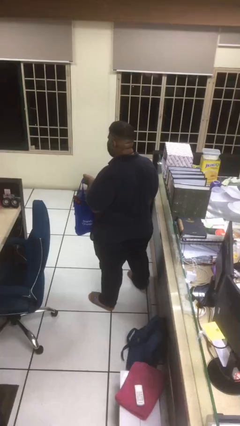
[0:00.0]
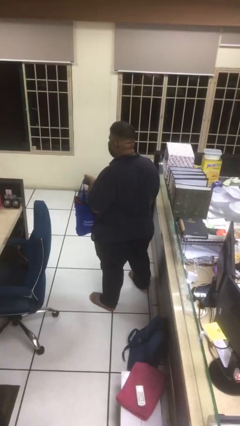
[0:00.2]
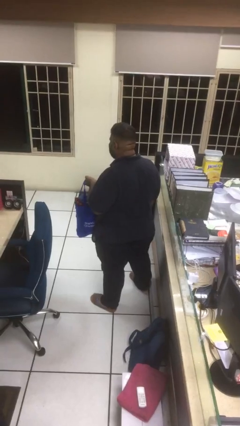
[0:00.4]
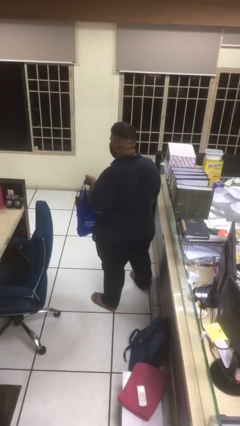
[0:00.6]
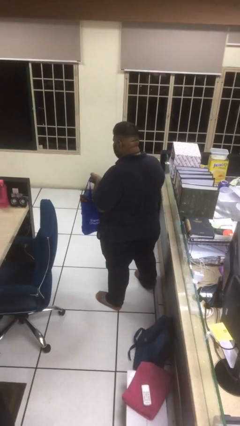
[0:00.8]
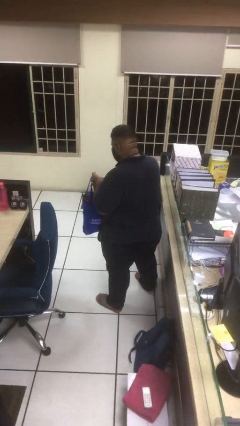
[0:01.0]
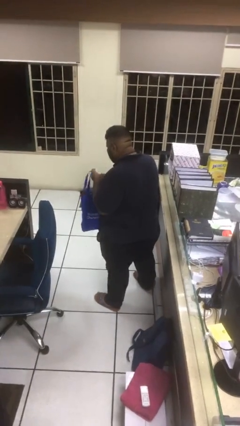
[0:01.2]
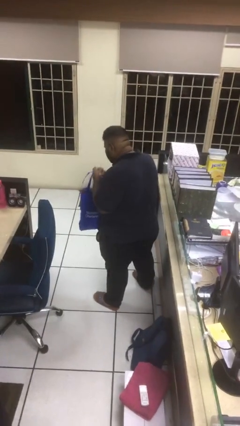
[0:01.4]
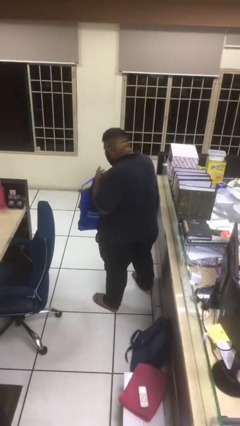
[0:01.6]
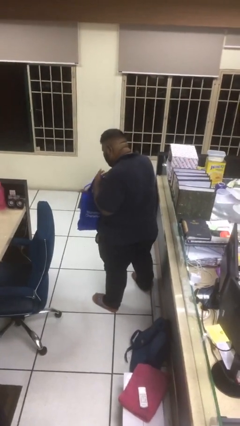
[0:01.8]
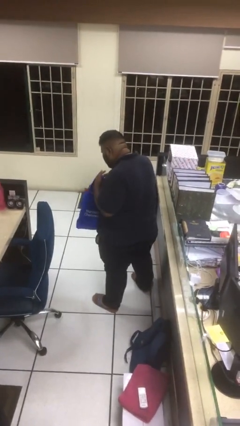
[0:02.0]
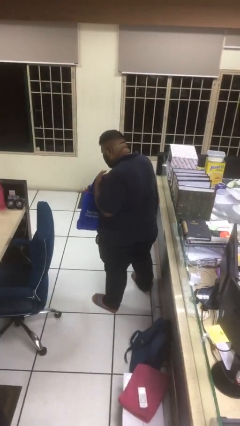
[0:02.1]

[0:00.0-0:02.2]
person searches in bag

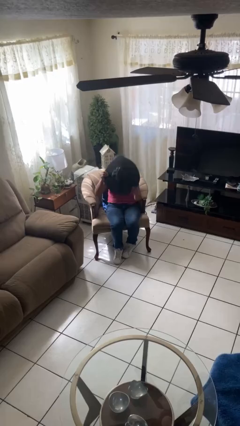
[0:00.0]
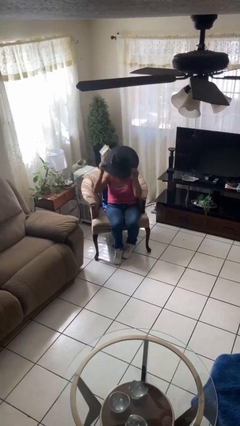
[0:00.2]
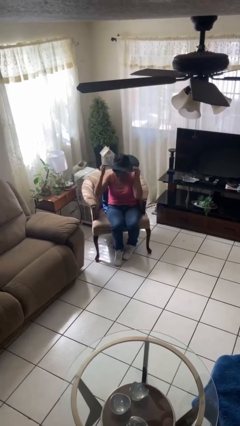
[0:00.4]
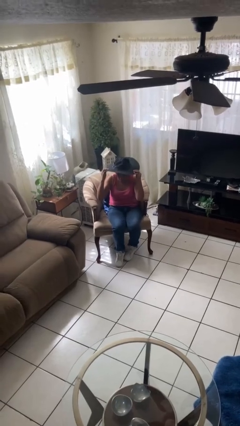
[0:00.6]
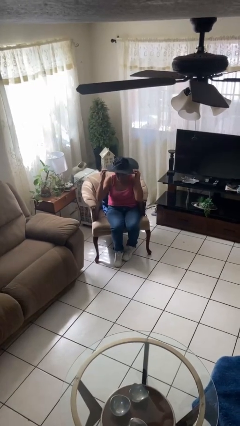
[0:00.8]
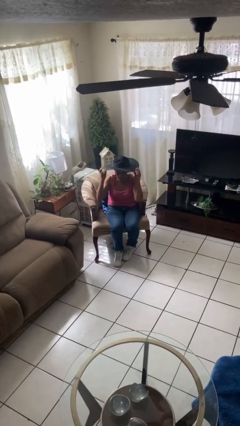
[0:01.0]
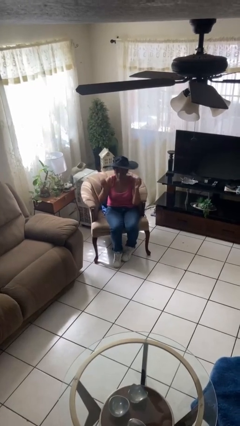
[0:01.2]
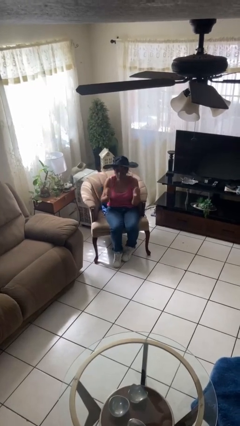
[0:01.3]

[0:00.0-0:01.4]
person puts on hat

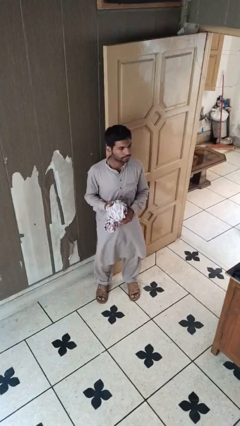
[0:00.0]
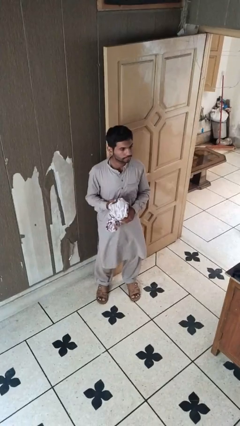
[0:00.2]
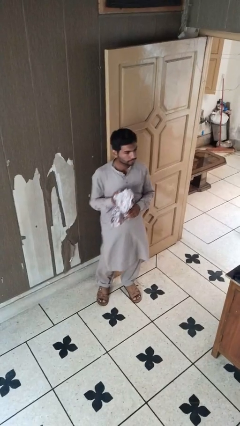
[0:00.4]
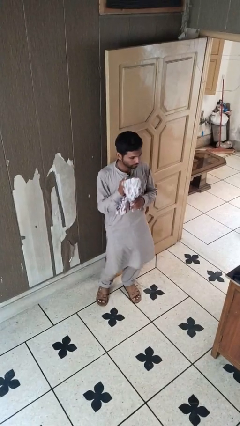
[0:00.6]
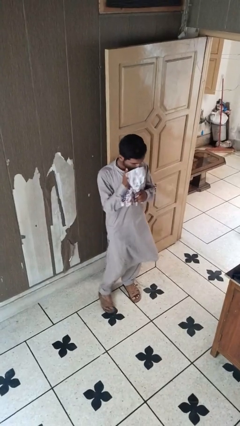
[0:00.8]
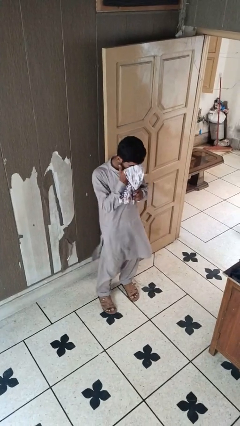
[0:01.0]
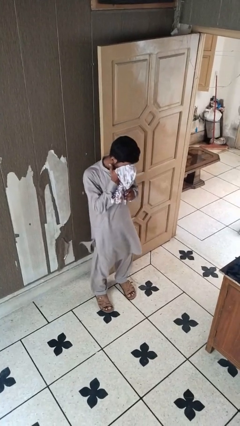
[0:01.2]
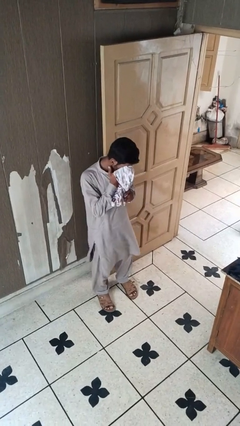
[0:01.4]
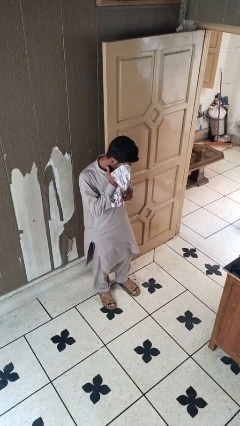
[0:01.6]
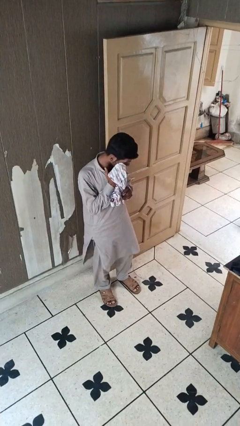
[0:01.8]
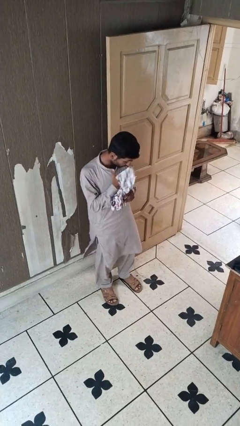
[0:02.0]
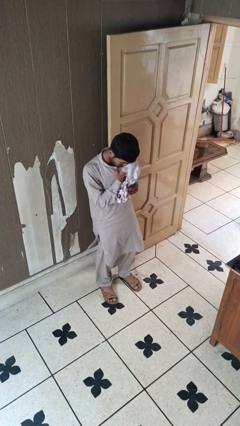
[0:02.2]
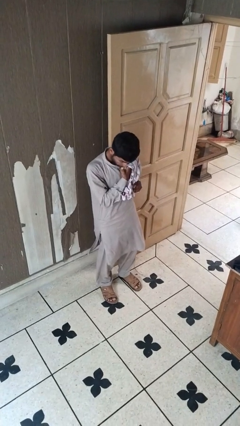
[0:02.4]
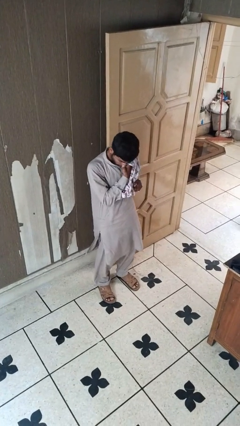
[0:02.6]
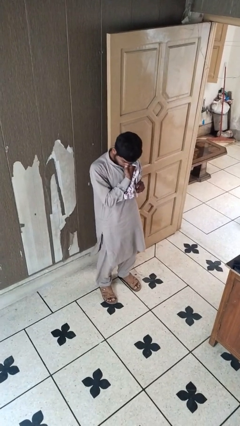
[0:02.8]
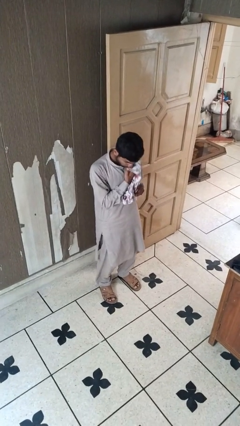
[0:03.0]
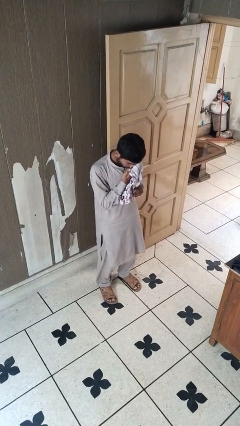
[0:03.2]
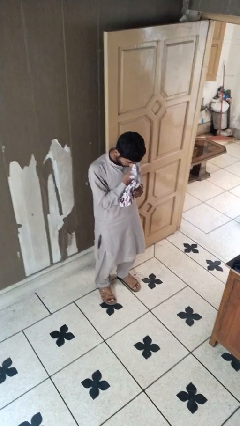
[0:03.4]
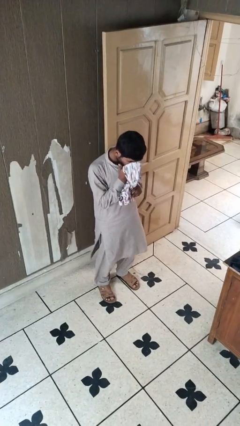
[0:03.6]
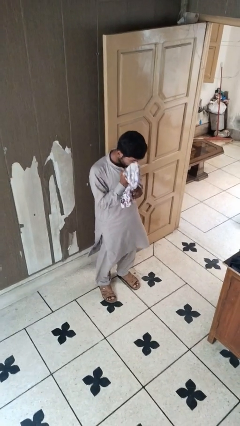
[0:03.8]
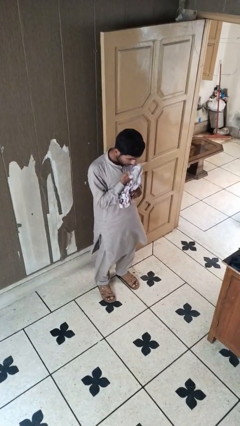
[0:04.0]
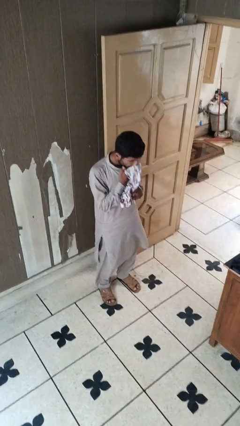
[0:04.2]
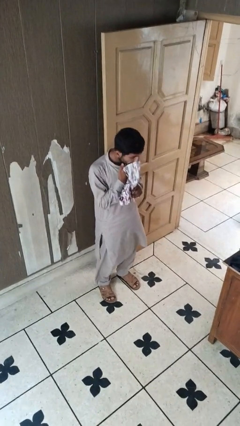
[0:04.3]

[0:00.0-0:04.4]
person wipes mouth with napkin

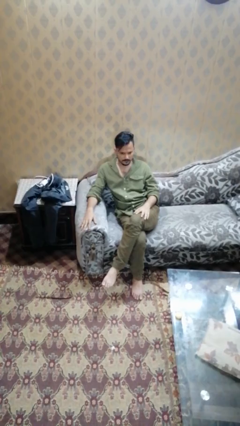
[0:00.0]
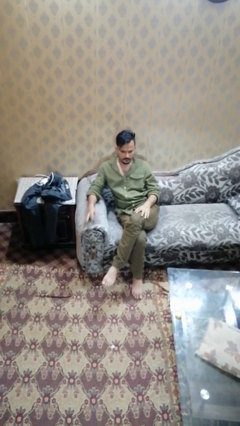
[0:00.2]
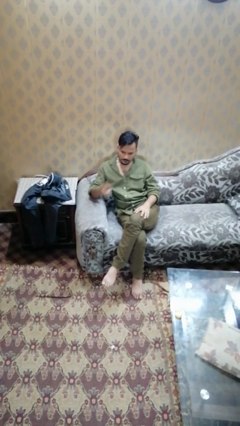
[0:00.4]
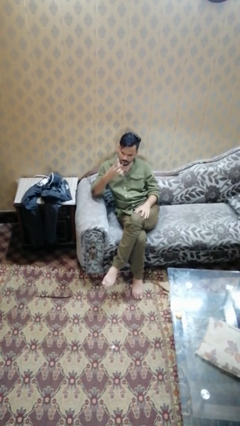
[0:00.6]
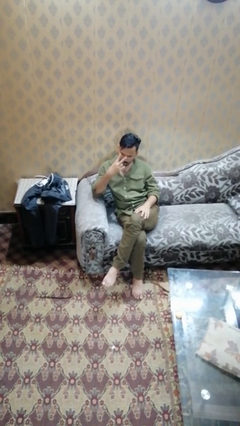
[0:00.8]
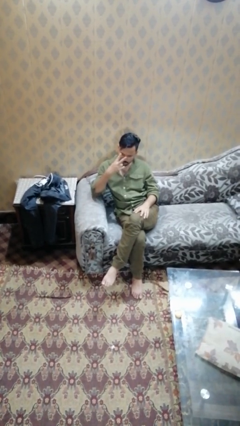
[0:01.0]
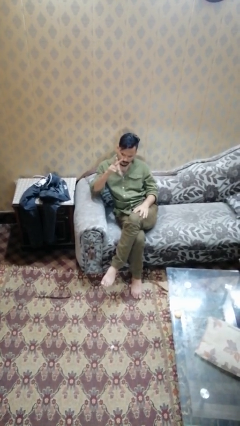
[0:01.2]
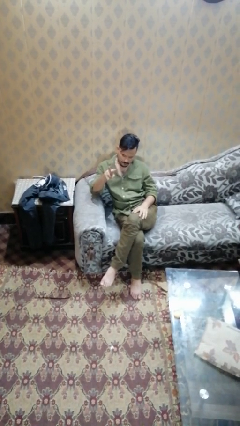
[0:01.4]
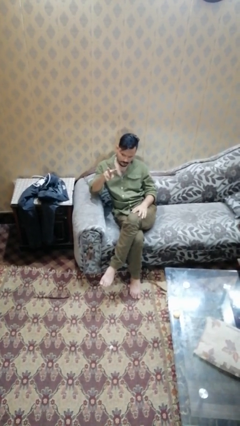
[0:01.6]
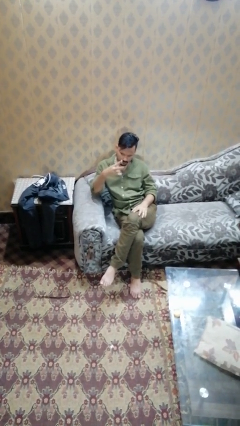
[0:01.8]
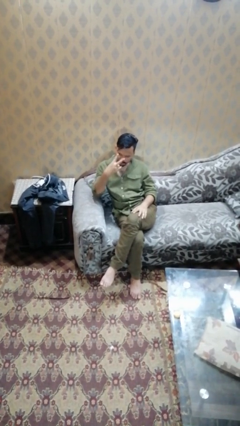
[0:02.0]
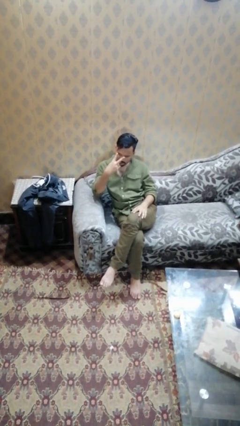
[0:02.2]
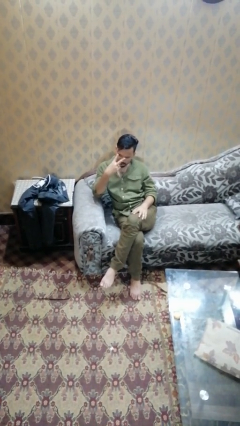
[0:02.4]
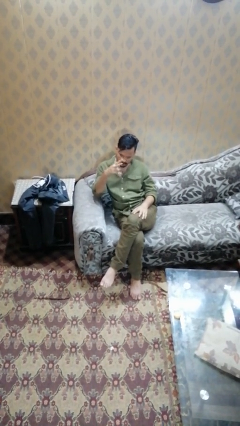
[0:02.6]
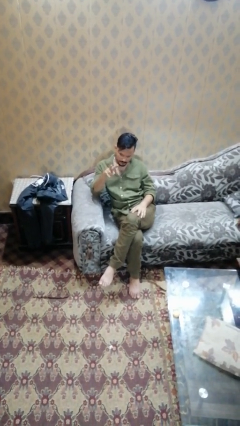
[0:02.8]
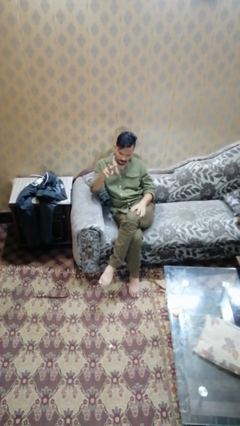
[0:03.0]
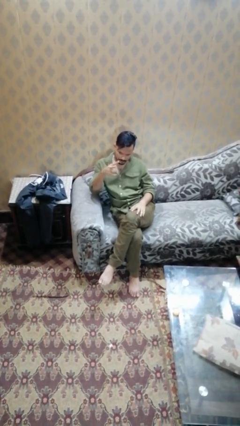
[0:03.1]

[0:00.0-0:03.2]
person gestures watch closely

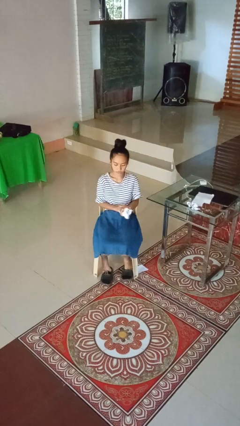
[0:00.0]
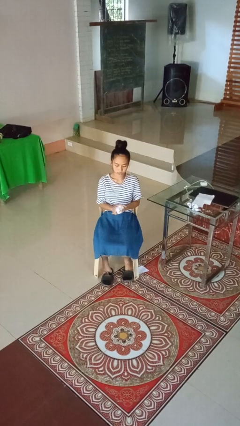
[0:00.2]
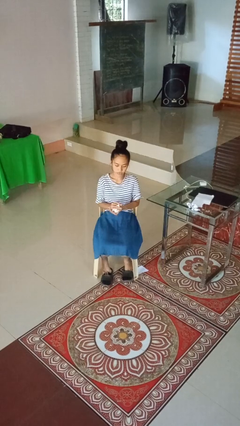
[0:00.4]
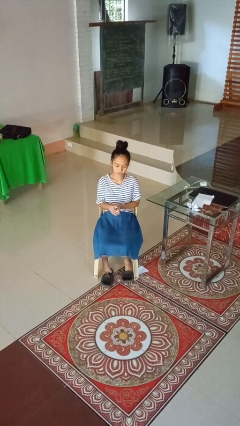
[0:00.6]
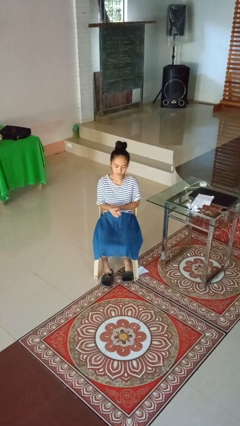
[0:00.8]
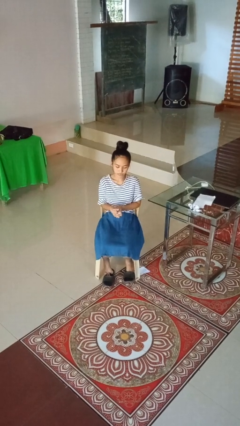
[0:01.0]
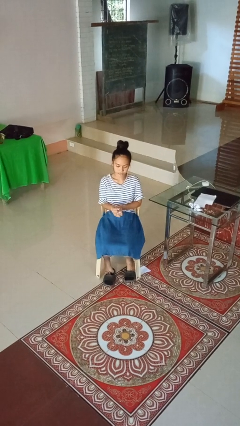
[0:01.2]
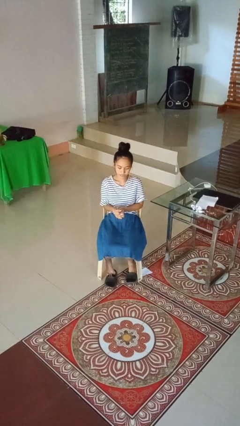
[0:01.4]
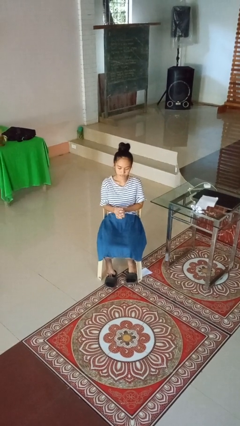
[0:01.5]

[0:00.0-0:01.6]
person crumples paper

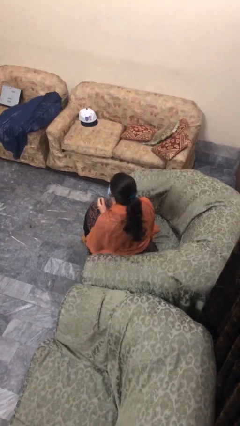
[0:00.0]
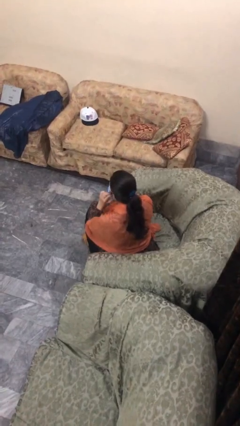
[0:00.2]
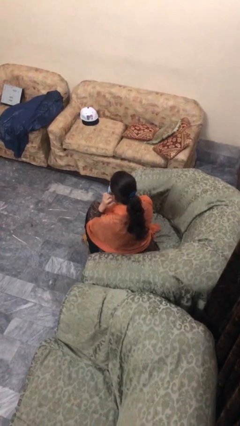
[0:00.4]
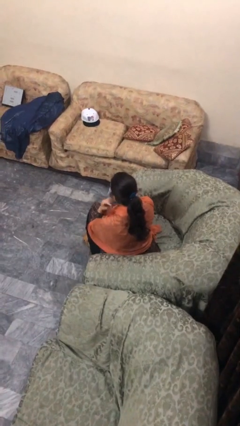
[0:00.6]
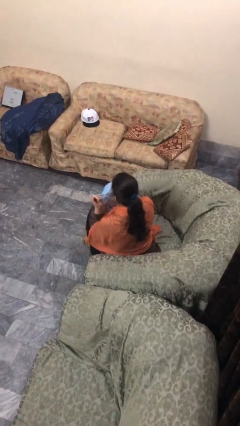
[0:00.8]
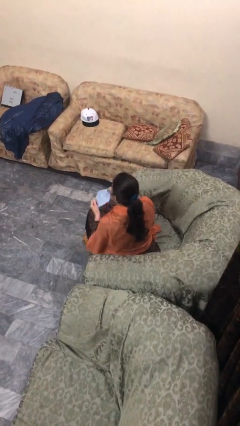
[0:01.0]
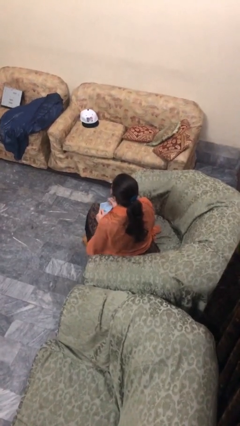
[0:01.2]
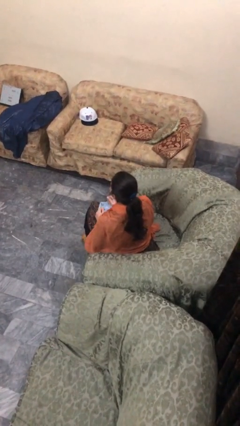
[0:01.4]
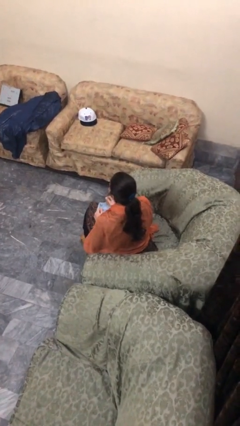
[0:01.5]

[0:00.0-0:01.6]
person takes off facemask

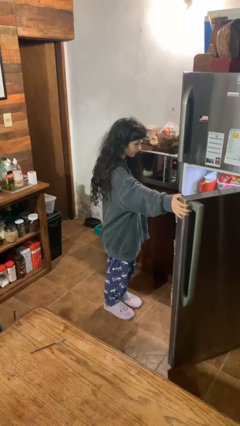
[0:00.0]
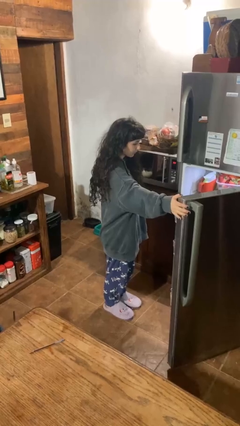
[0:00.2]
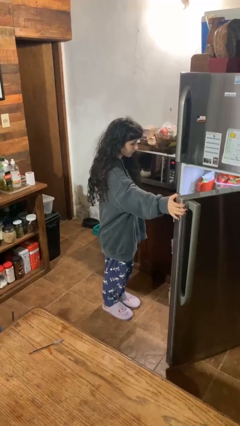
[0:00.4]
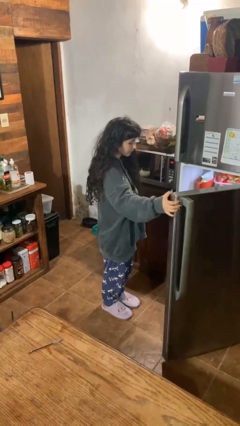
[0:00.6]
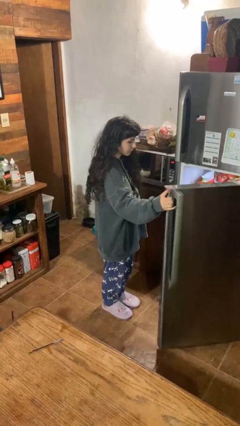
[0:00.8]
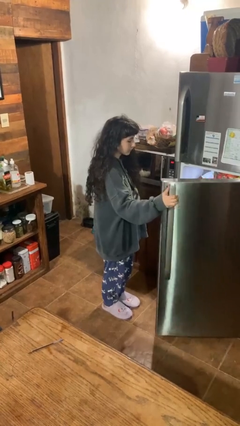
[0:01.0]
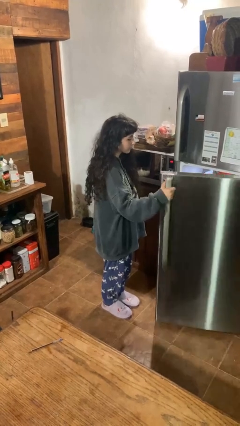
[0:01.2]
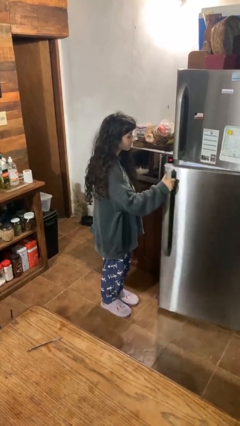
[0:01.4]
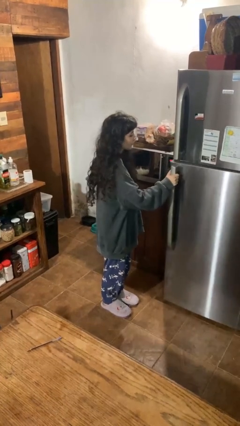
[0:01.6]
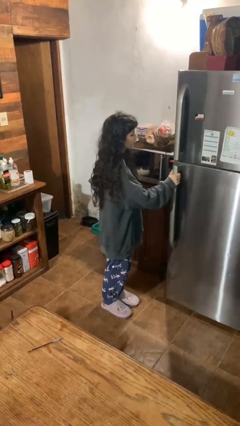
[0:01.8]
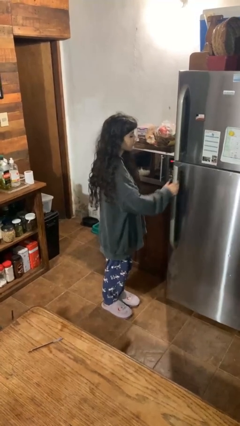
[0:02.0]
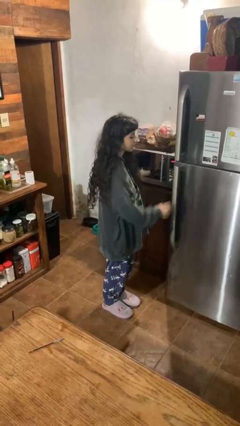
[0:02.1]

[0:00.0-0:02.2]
person closes refrigerator

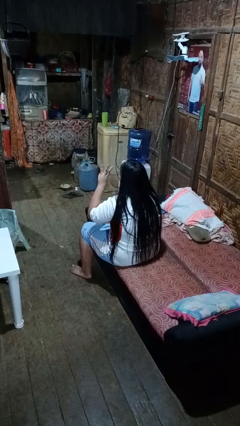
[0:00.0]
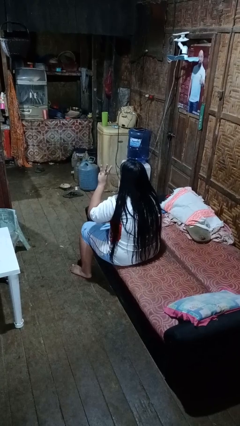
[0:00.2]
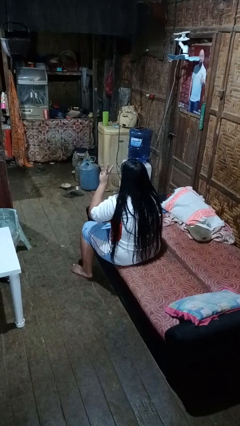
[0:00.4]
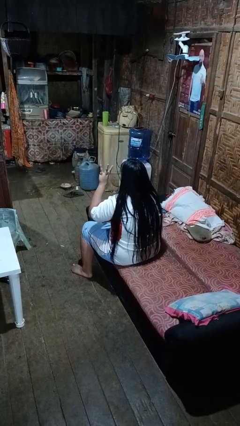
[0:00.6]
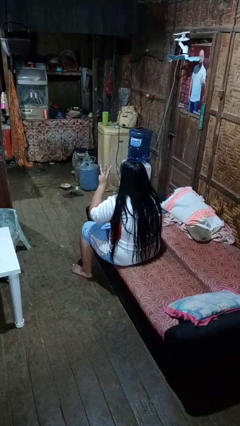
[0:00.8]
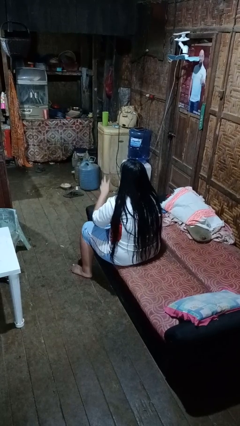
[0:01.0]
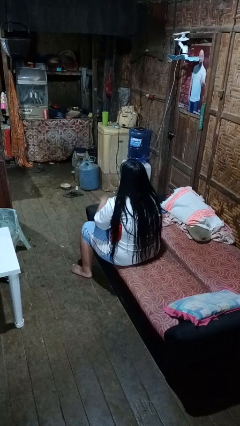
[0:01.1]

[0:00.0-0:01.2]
person gestures number three
